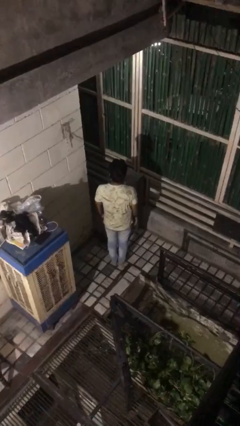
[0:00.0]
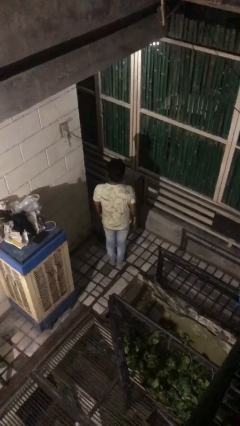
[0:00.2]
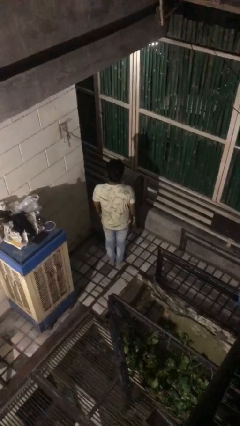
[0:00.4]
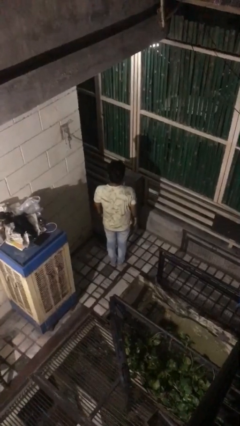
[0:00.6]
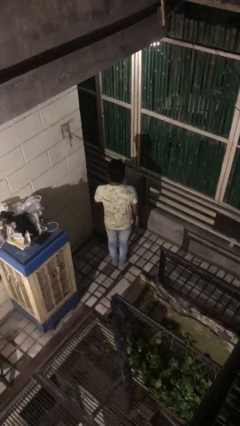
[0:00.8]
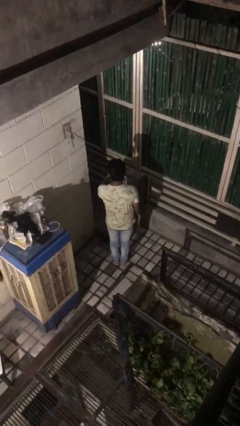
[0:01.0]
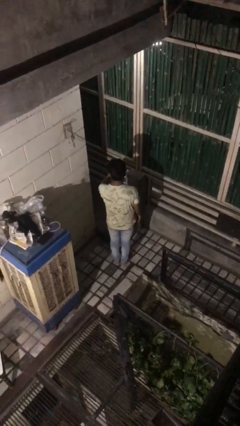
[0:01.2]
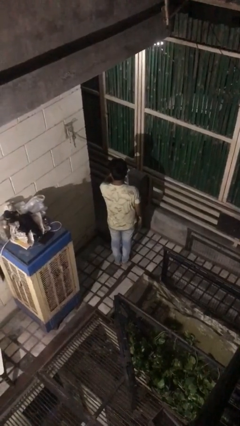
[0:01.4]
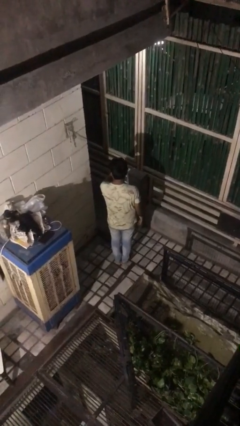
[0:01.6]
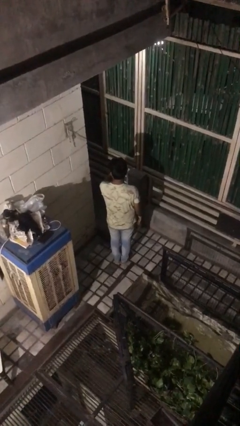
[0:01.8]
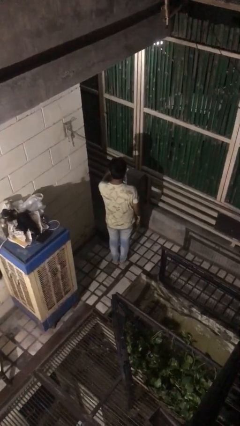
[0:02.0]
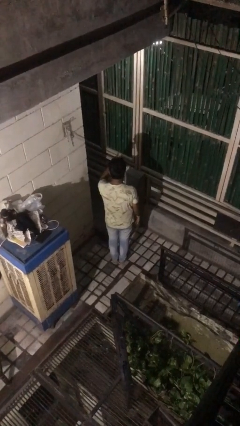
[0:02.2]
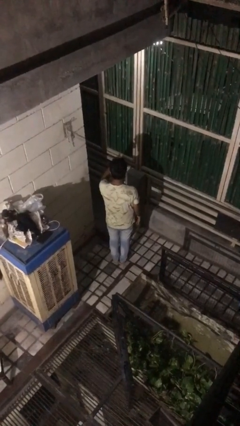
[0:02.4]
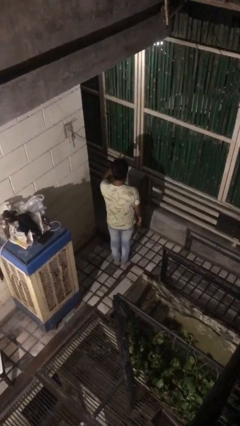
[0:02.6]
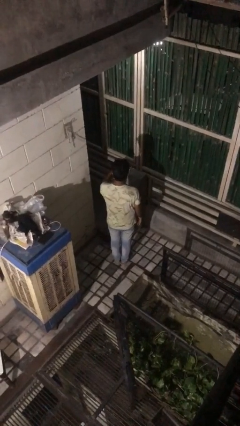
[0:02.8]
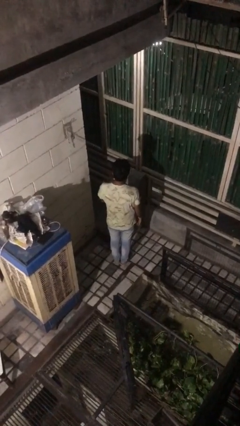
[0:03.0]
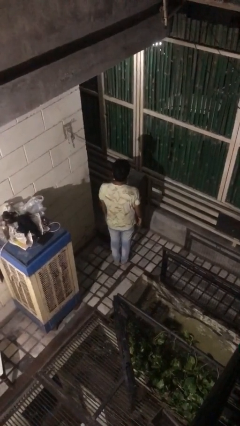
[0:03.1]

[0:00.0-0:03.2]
person gestures watch closely

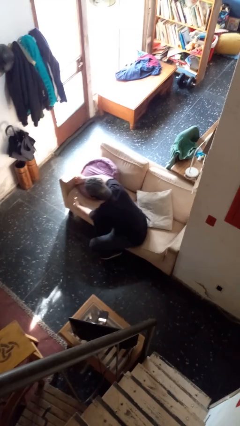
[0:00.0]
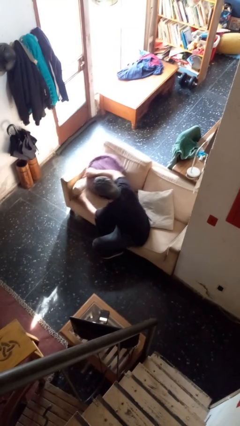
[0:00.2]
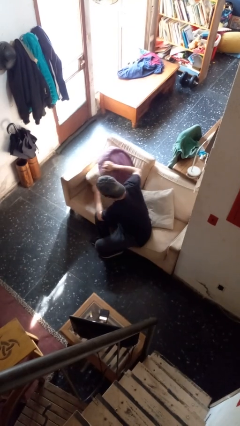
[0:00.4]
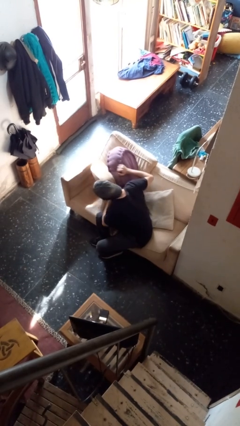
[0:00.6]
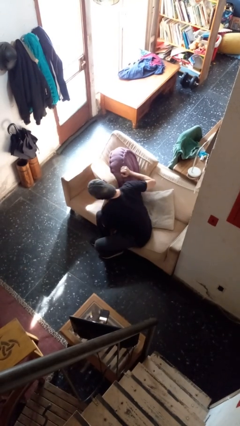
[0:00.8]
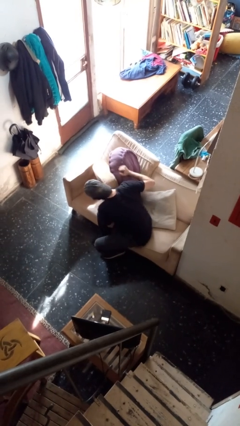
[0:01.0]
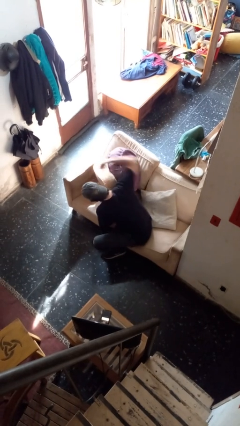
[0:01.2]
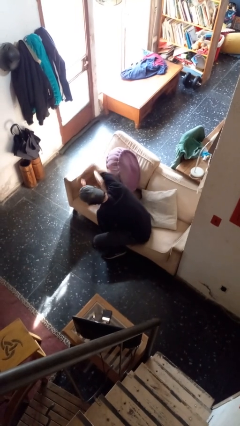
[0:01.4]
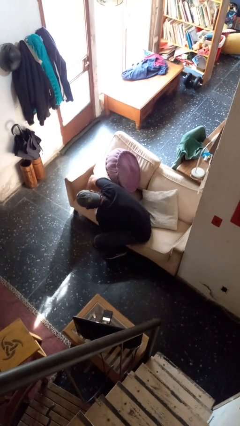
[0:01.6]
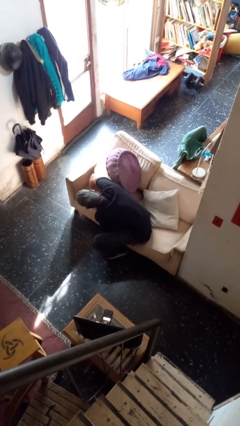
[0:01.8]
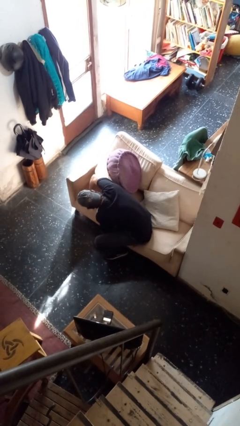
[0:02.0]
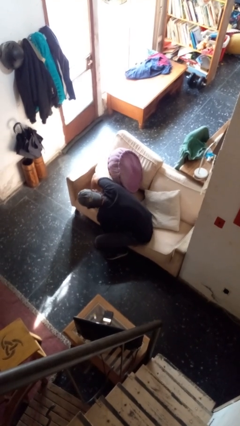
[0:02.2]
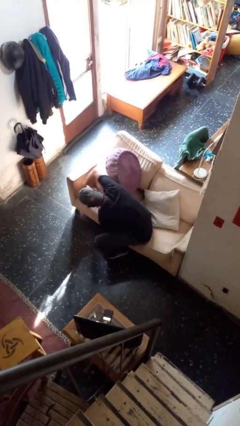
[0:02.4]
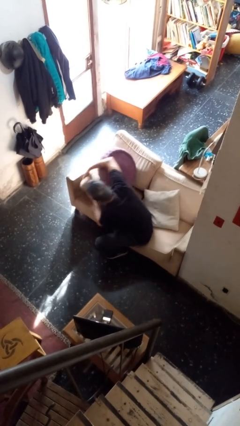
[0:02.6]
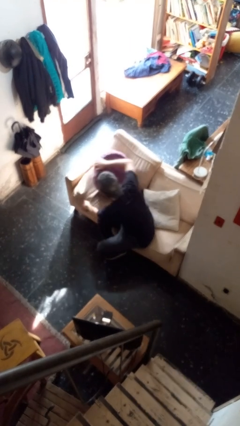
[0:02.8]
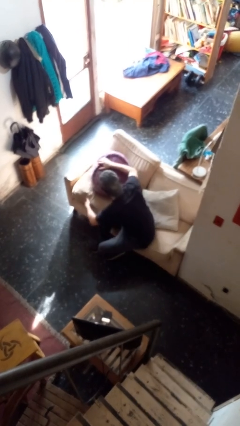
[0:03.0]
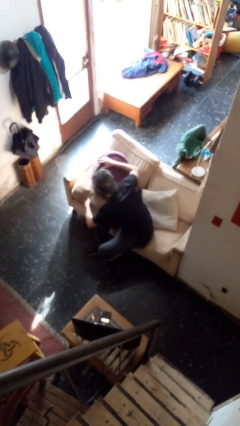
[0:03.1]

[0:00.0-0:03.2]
person searches in couch

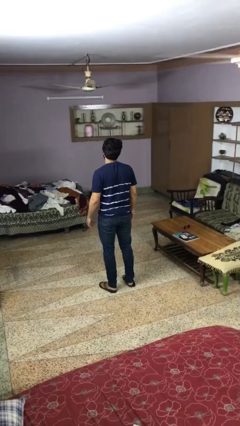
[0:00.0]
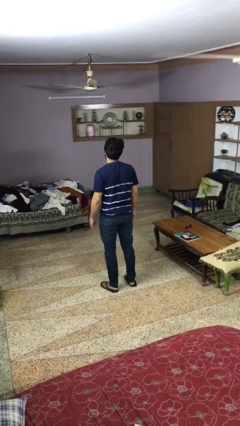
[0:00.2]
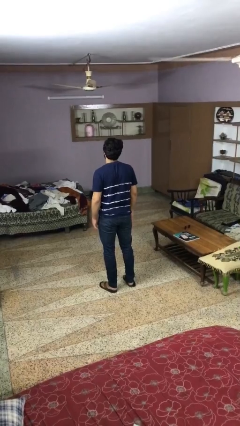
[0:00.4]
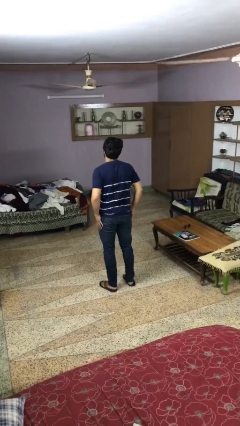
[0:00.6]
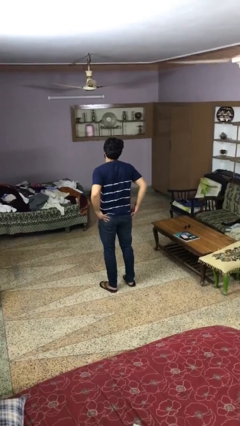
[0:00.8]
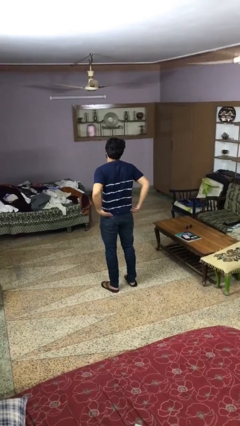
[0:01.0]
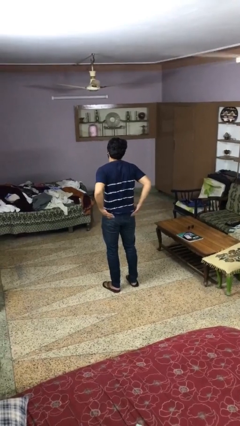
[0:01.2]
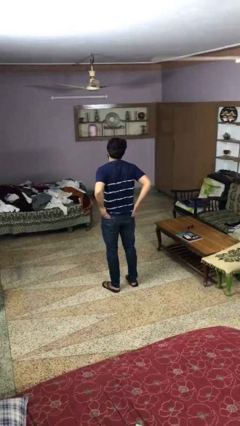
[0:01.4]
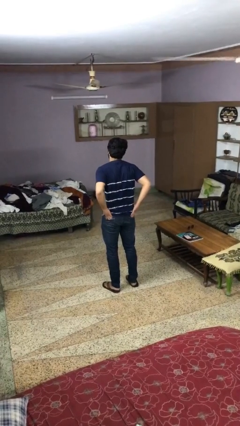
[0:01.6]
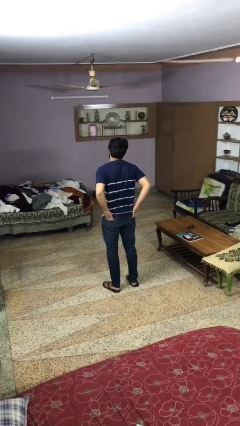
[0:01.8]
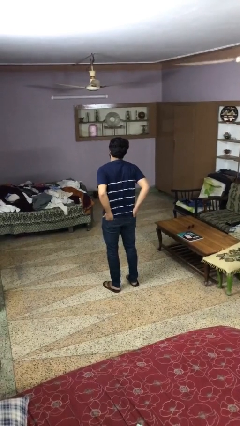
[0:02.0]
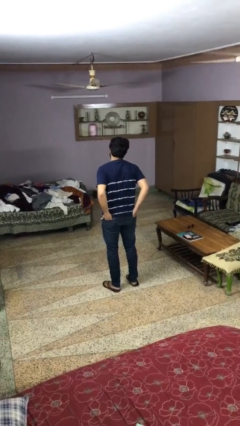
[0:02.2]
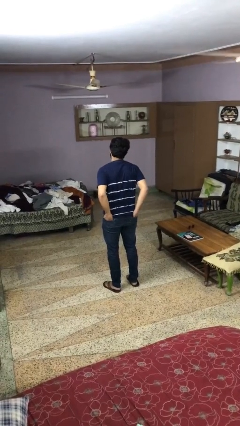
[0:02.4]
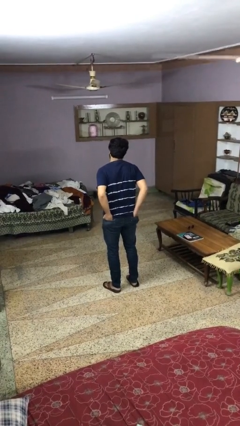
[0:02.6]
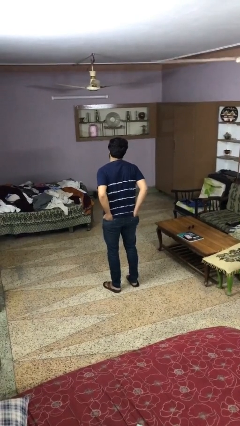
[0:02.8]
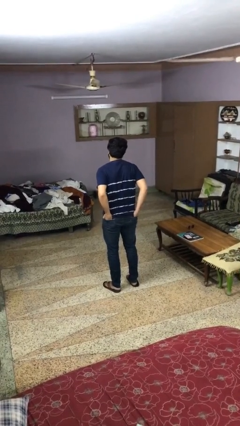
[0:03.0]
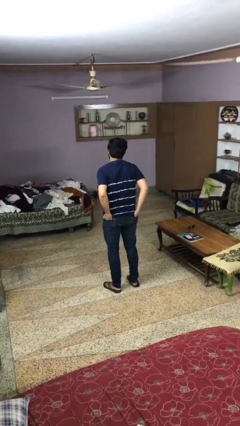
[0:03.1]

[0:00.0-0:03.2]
person puts hands in back pockets

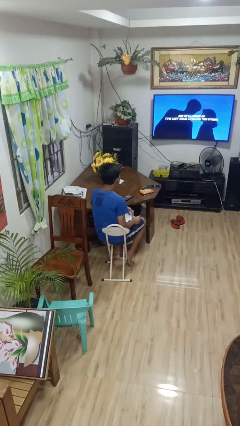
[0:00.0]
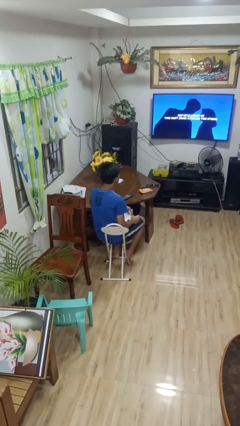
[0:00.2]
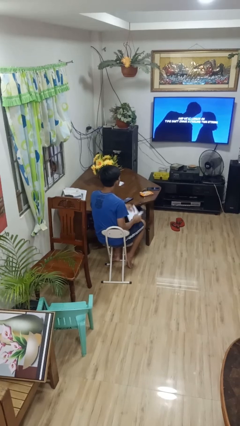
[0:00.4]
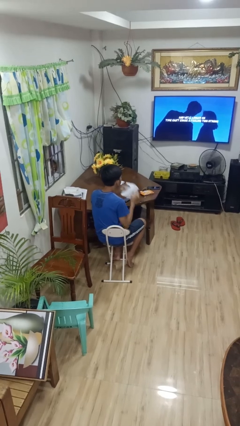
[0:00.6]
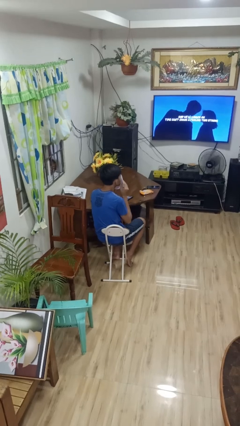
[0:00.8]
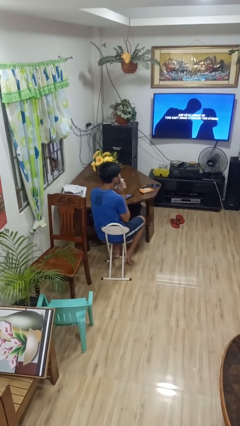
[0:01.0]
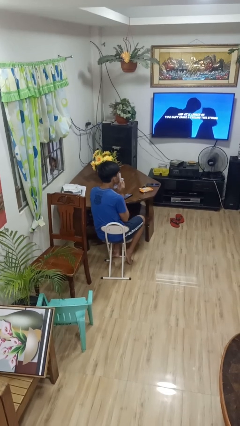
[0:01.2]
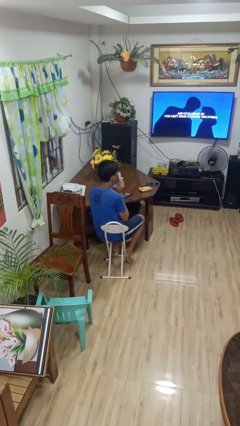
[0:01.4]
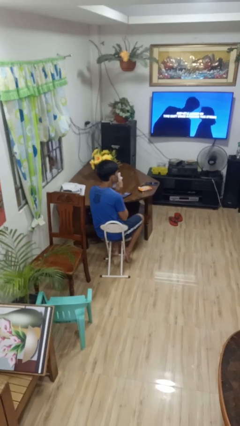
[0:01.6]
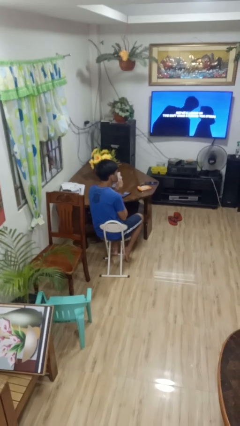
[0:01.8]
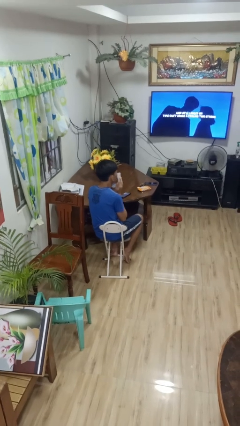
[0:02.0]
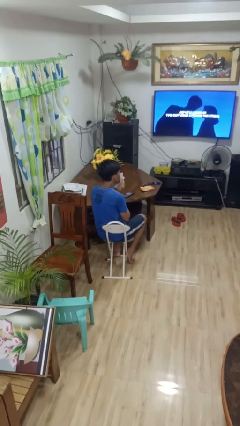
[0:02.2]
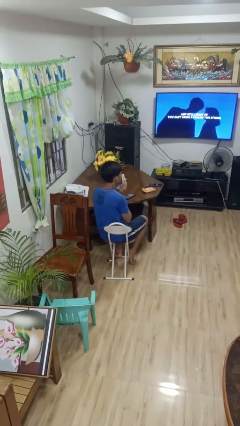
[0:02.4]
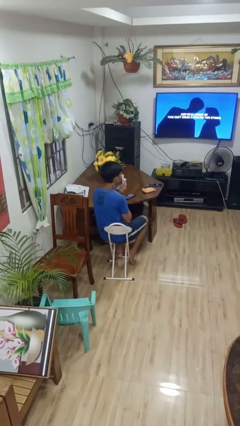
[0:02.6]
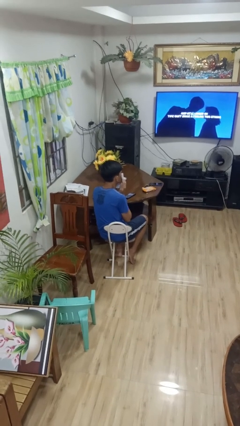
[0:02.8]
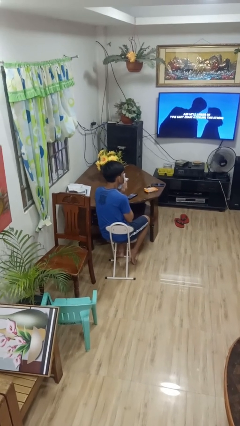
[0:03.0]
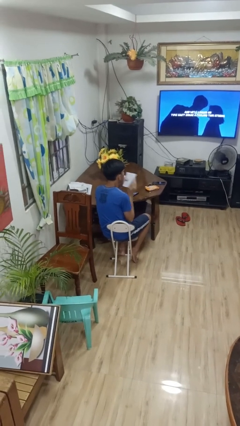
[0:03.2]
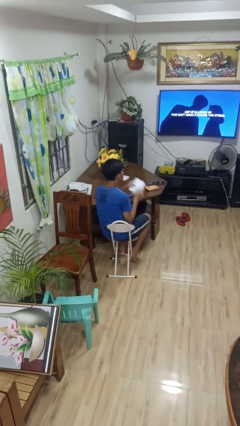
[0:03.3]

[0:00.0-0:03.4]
person wipes mouth with napkin

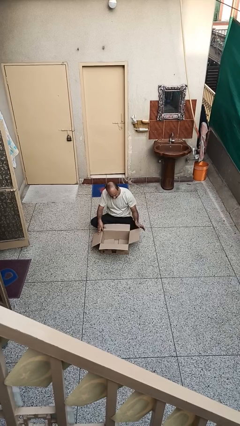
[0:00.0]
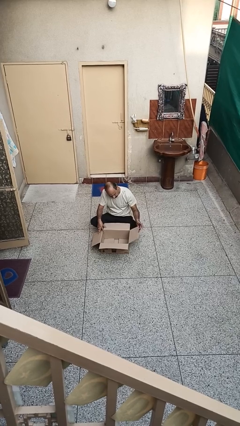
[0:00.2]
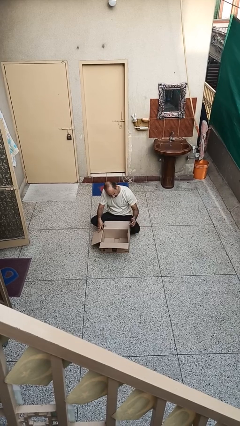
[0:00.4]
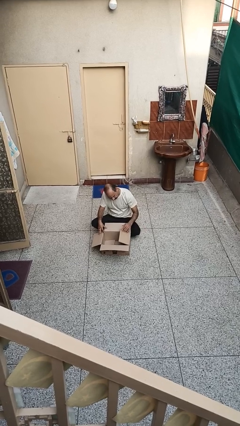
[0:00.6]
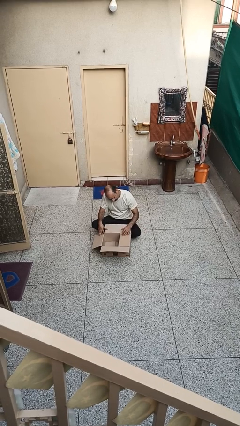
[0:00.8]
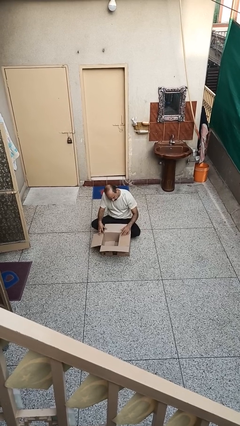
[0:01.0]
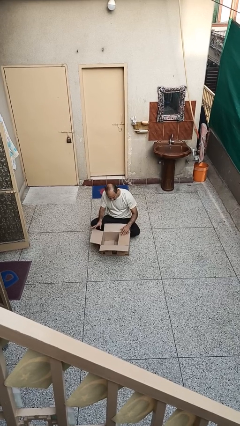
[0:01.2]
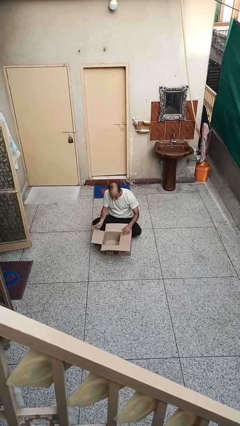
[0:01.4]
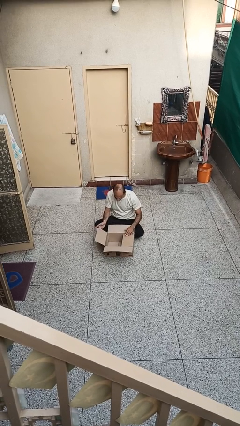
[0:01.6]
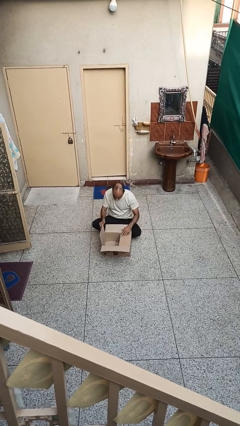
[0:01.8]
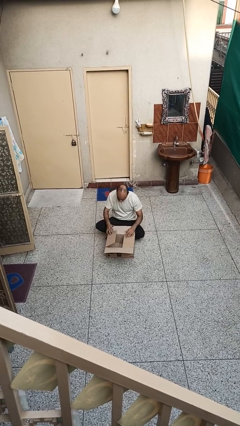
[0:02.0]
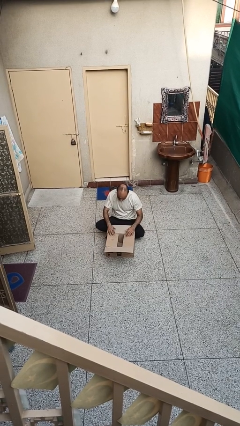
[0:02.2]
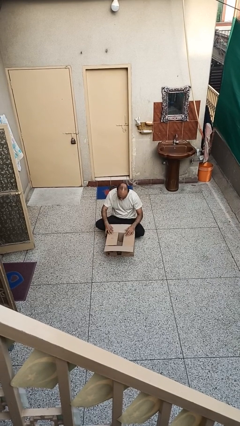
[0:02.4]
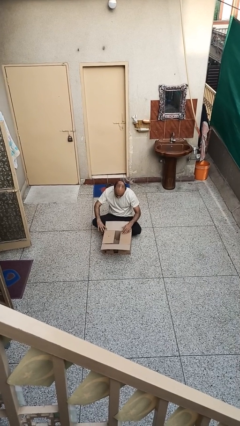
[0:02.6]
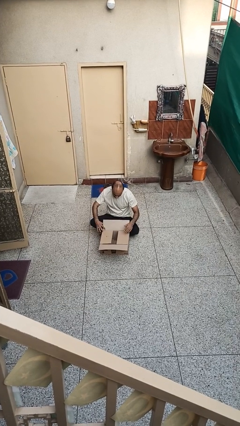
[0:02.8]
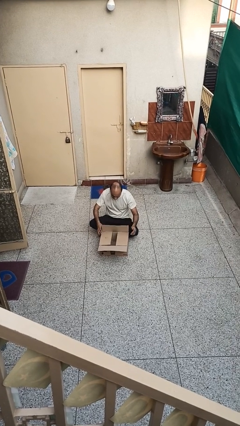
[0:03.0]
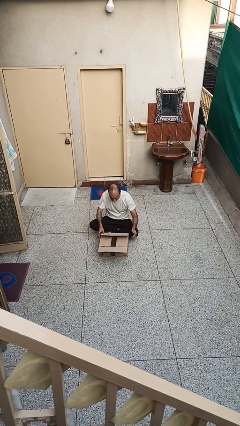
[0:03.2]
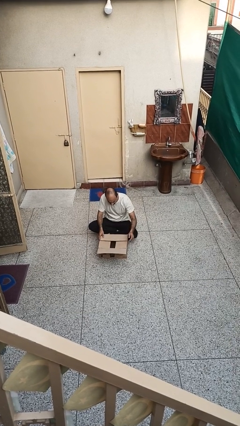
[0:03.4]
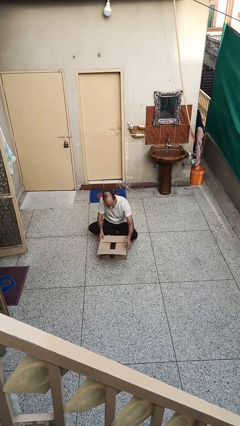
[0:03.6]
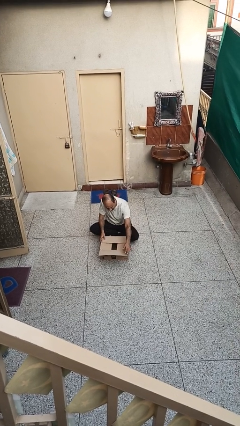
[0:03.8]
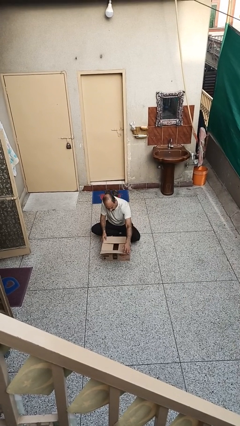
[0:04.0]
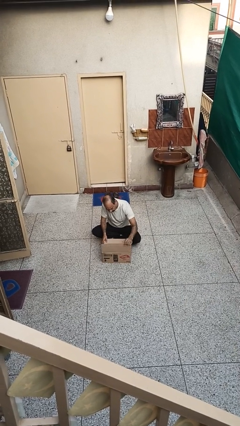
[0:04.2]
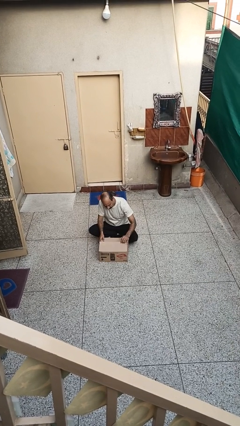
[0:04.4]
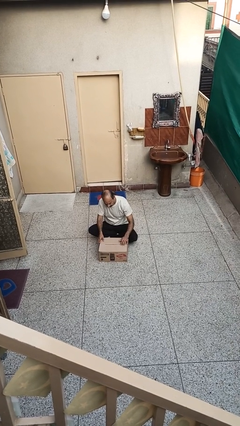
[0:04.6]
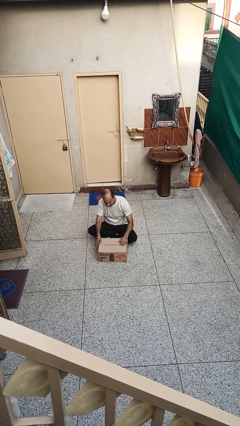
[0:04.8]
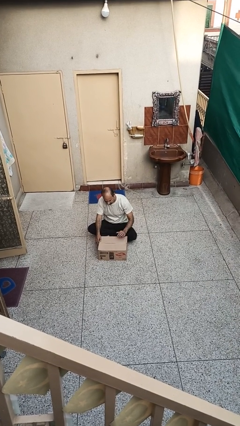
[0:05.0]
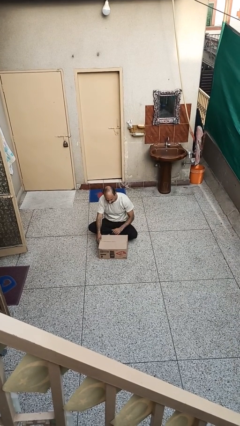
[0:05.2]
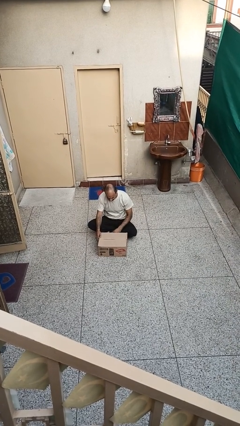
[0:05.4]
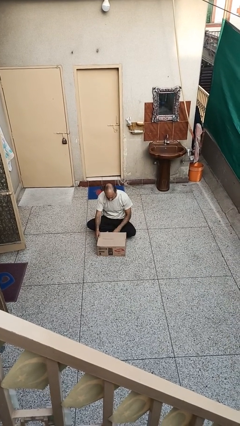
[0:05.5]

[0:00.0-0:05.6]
person closes box
